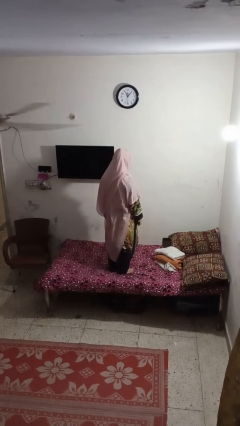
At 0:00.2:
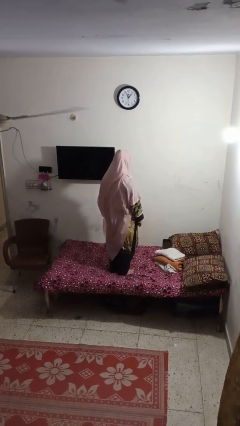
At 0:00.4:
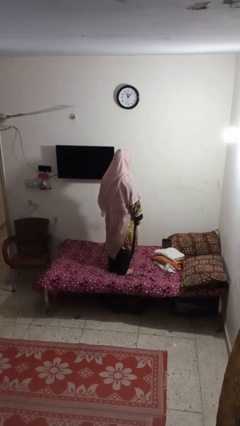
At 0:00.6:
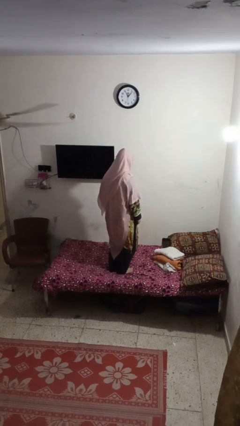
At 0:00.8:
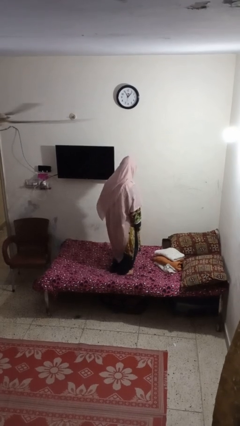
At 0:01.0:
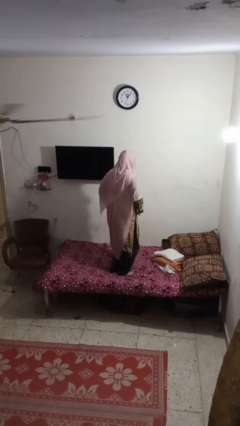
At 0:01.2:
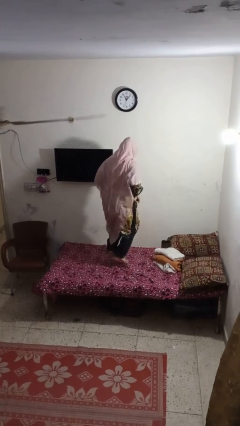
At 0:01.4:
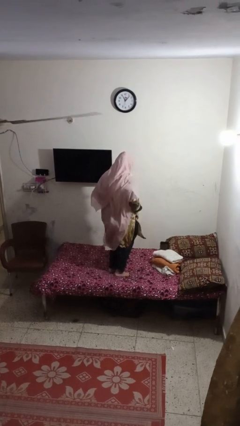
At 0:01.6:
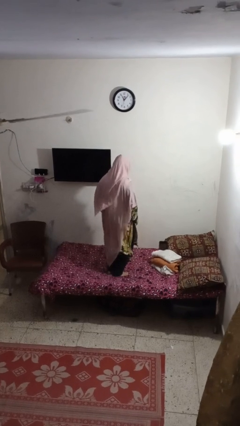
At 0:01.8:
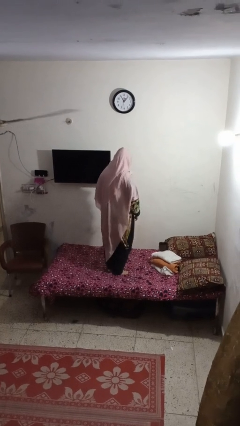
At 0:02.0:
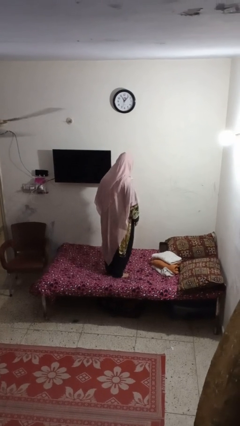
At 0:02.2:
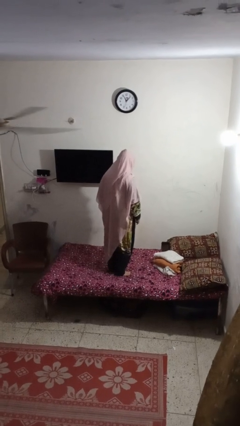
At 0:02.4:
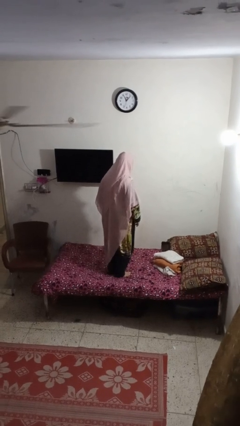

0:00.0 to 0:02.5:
person jumps on bed

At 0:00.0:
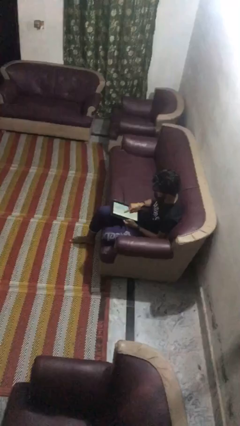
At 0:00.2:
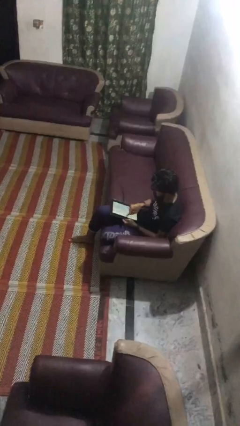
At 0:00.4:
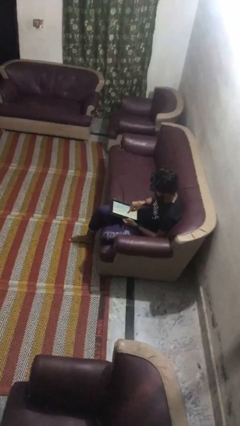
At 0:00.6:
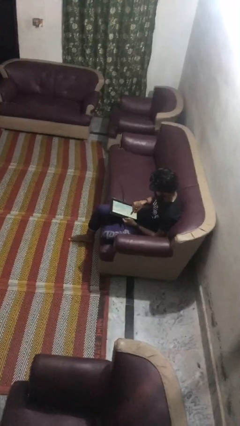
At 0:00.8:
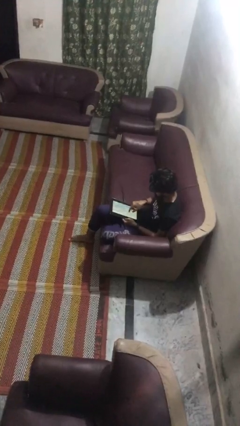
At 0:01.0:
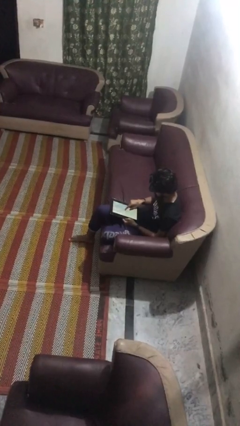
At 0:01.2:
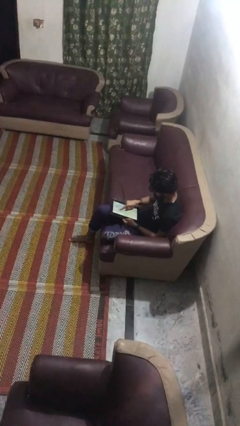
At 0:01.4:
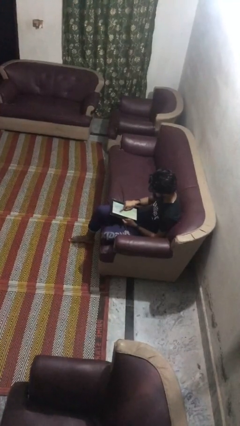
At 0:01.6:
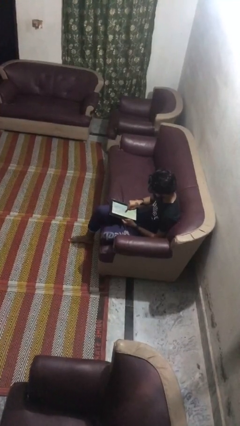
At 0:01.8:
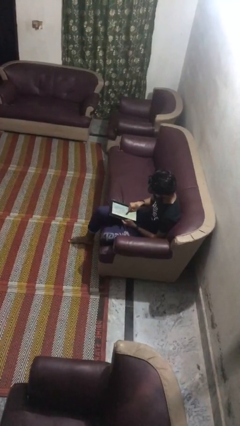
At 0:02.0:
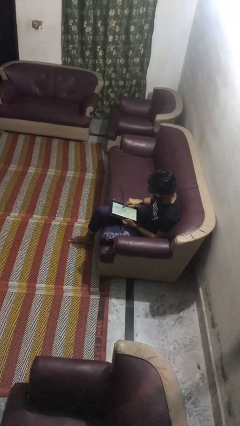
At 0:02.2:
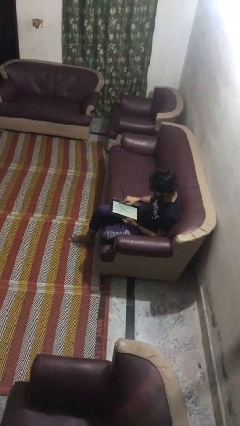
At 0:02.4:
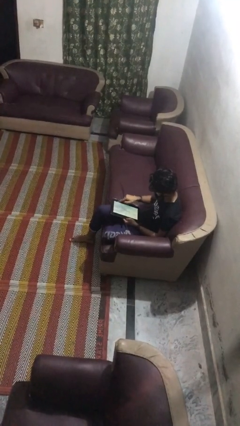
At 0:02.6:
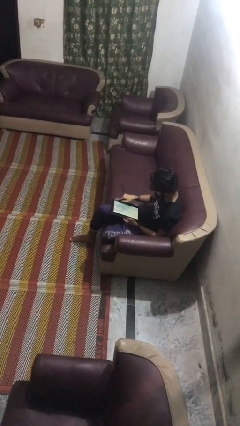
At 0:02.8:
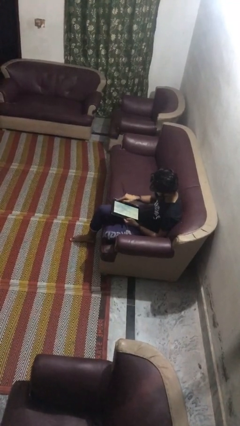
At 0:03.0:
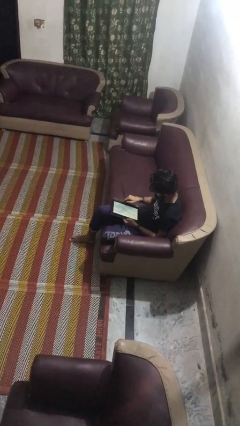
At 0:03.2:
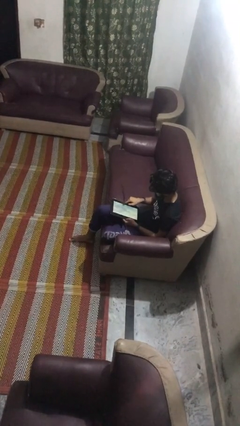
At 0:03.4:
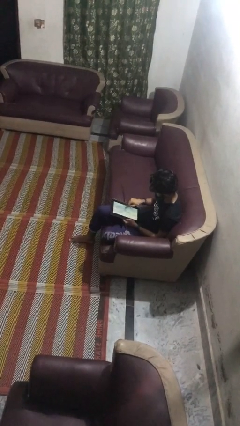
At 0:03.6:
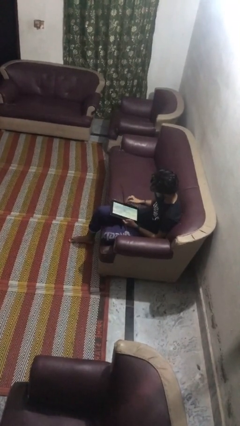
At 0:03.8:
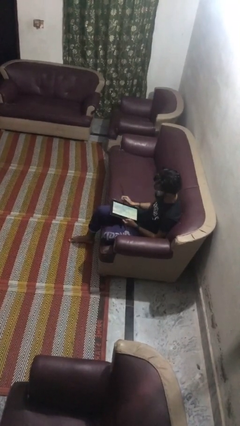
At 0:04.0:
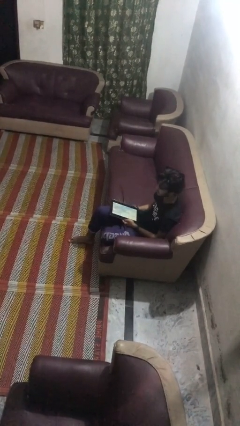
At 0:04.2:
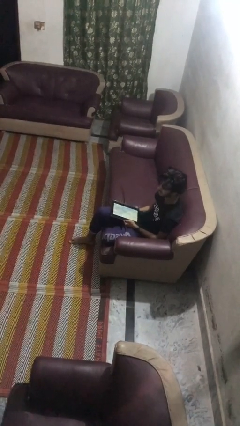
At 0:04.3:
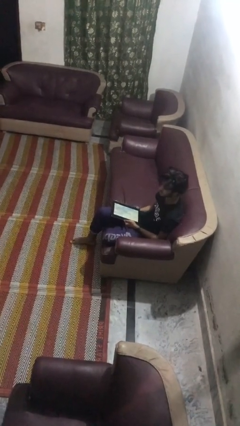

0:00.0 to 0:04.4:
person interacts with tablet

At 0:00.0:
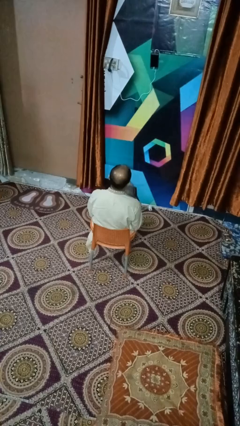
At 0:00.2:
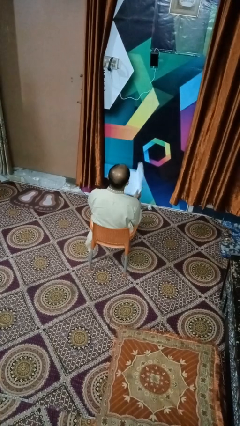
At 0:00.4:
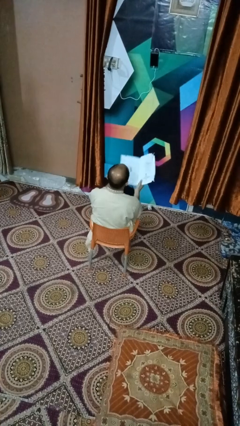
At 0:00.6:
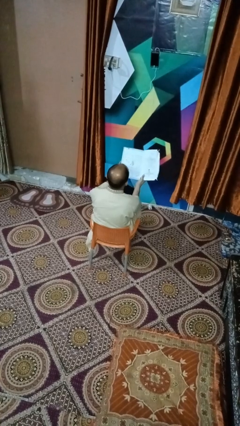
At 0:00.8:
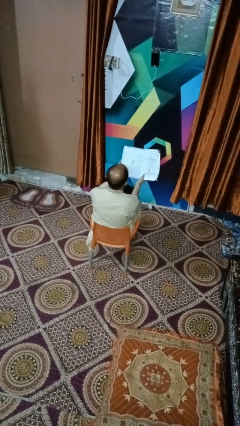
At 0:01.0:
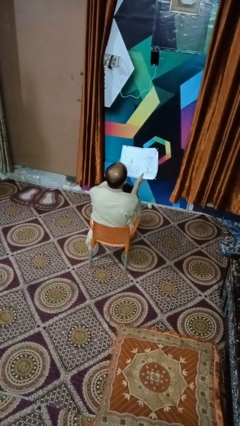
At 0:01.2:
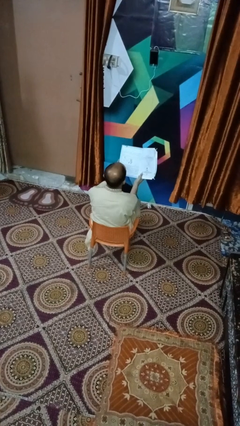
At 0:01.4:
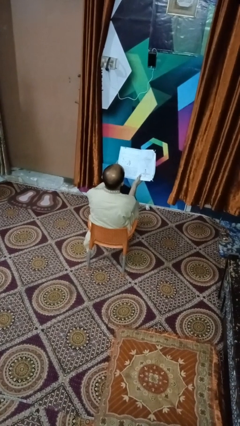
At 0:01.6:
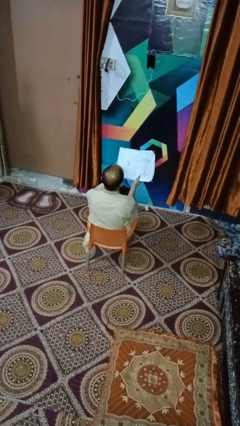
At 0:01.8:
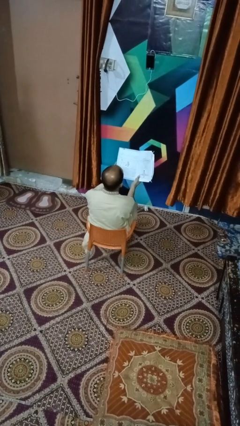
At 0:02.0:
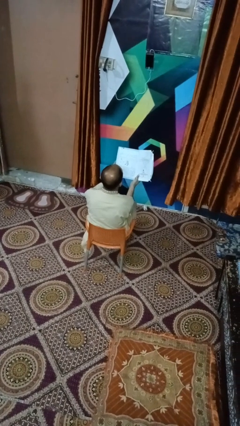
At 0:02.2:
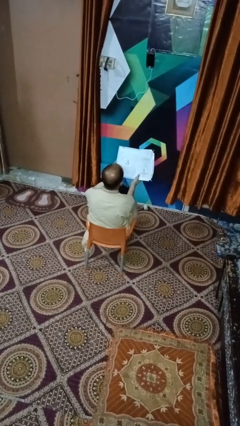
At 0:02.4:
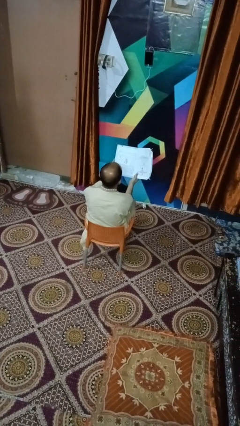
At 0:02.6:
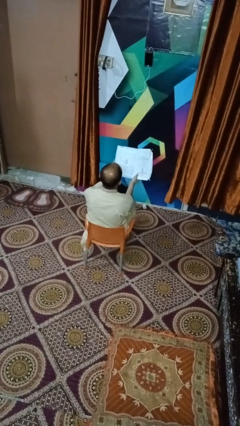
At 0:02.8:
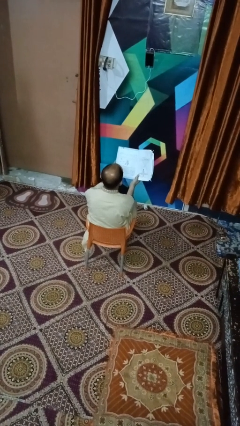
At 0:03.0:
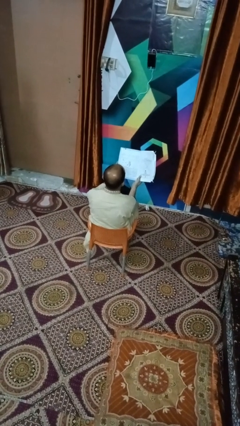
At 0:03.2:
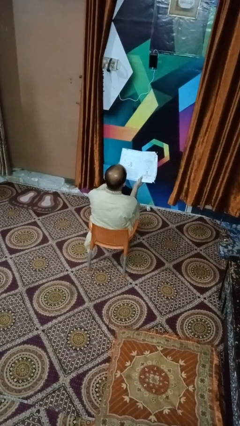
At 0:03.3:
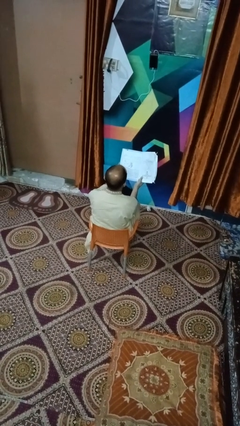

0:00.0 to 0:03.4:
person reads book

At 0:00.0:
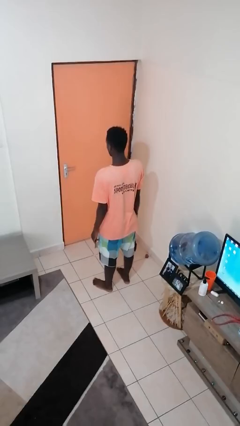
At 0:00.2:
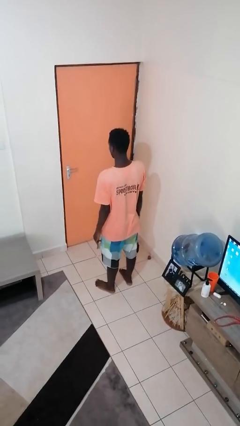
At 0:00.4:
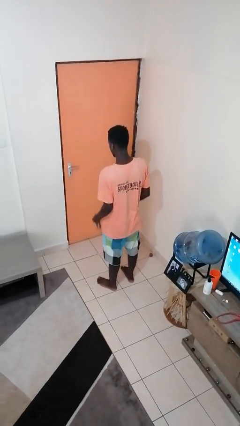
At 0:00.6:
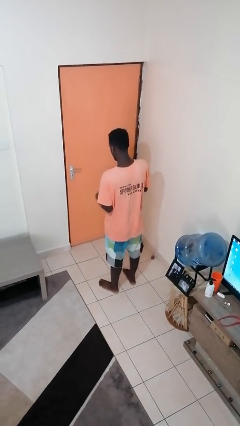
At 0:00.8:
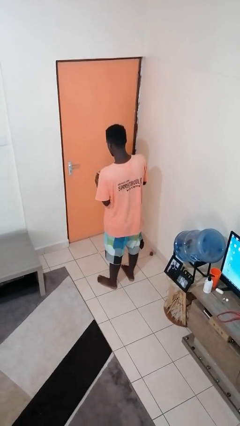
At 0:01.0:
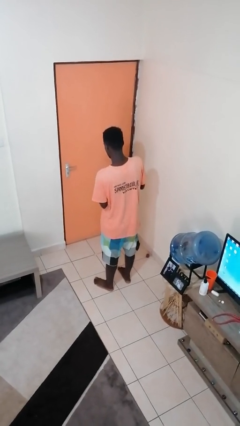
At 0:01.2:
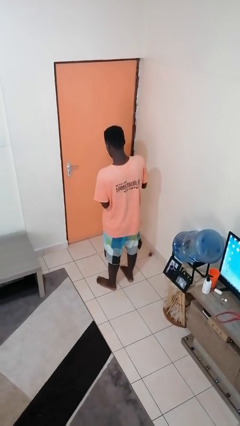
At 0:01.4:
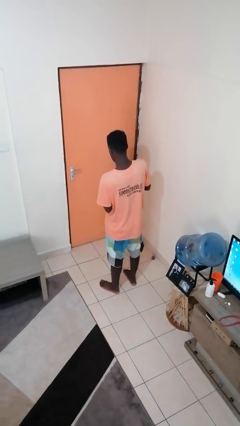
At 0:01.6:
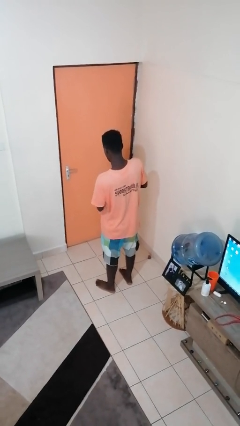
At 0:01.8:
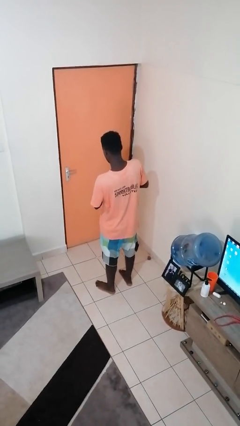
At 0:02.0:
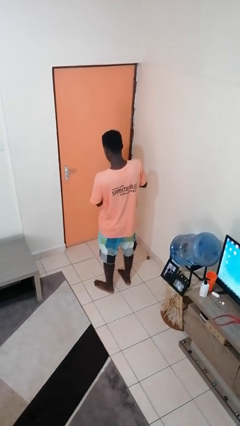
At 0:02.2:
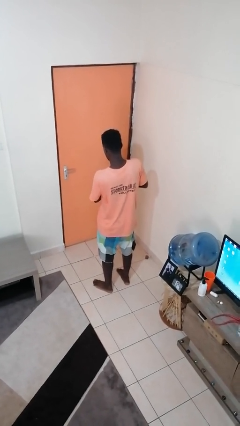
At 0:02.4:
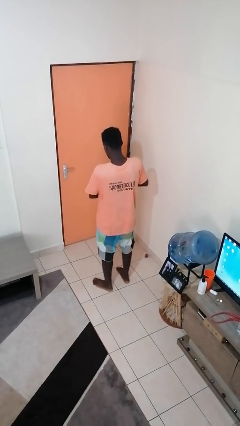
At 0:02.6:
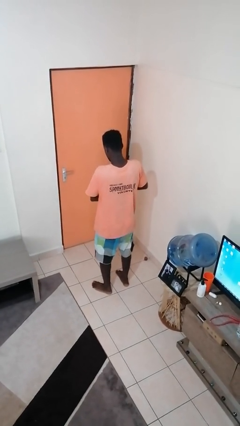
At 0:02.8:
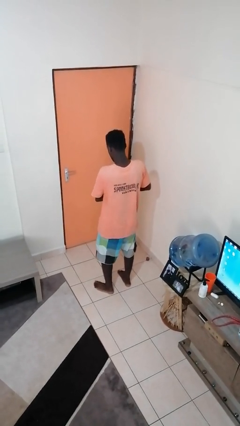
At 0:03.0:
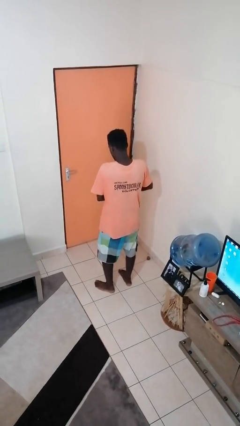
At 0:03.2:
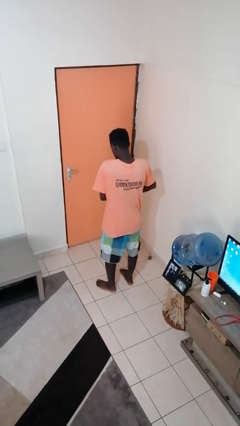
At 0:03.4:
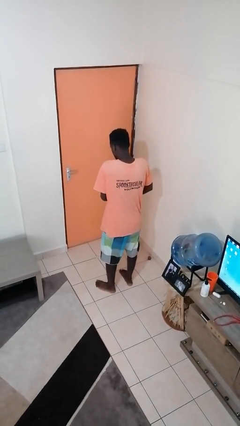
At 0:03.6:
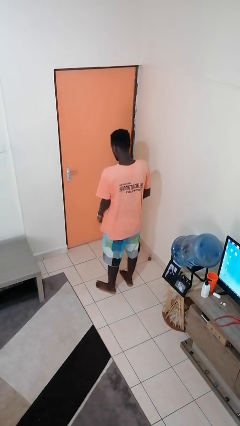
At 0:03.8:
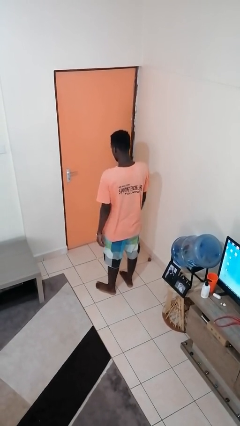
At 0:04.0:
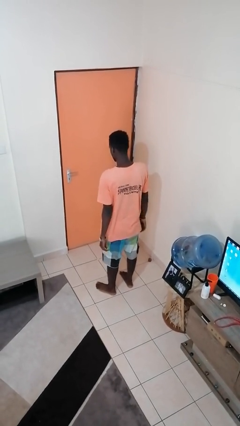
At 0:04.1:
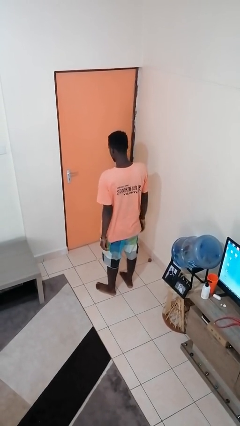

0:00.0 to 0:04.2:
person puts on wristwatch

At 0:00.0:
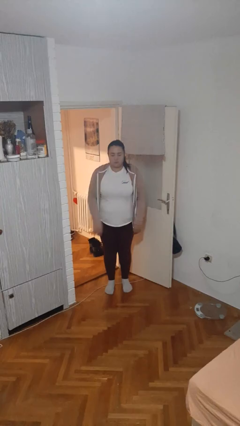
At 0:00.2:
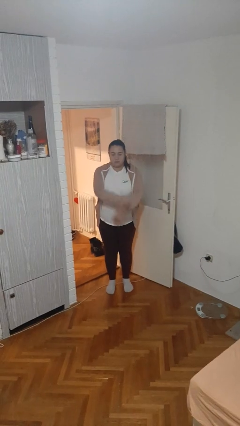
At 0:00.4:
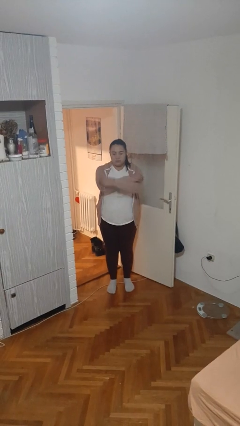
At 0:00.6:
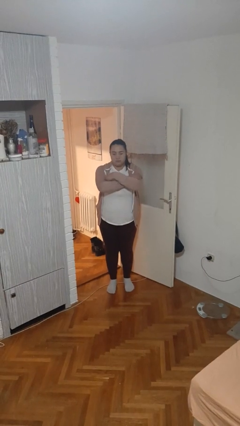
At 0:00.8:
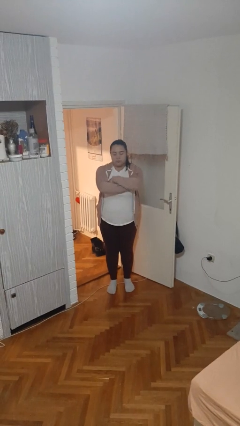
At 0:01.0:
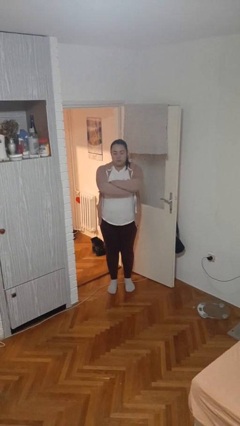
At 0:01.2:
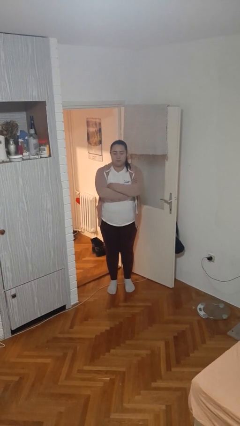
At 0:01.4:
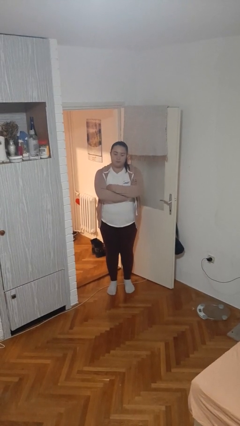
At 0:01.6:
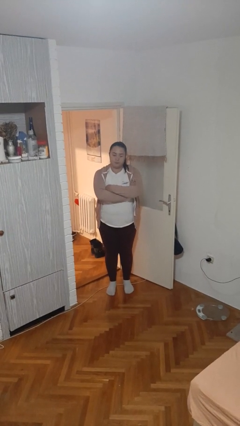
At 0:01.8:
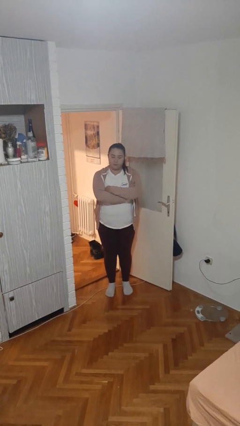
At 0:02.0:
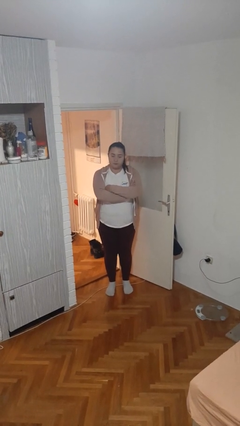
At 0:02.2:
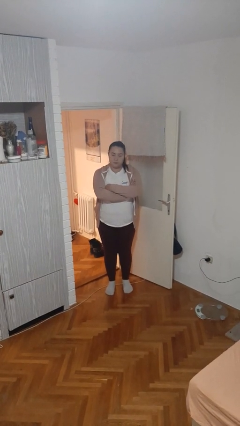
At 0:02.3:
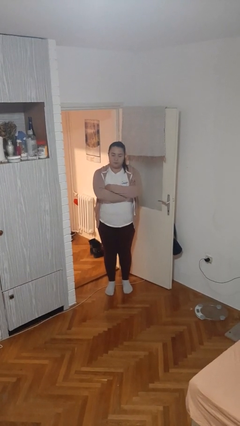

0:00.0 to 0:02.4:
person crosses arms

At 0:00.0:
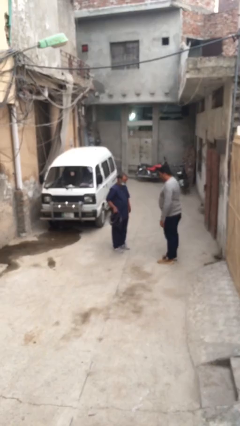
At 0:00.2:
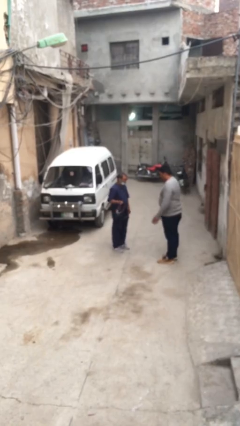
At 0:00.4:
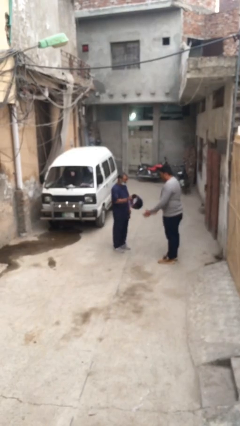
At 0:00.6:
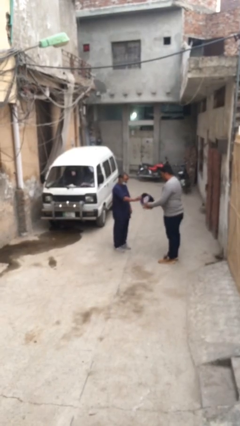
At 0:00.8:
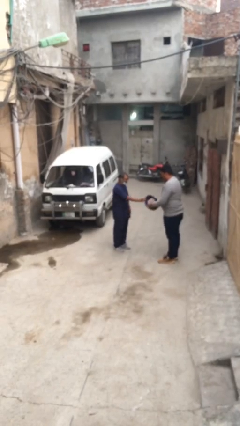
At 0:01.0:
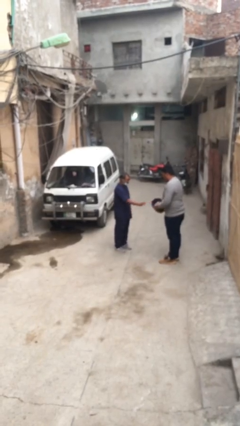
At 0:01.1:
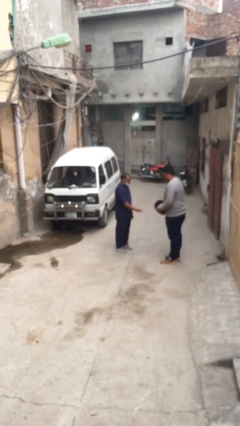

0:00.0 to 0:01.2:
person transfers object to person
